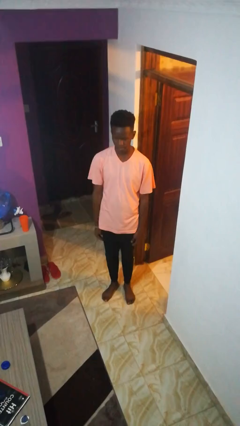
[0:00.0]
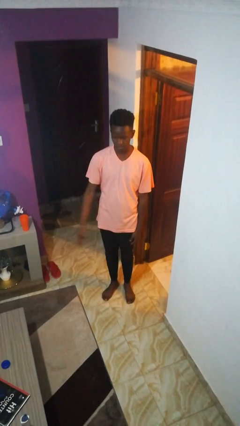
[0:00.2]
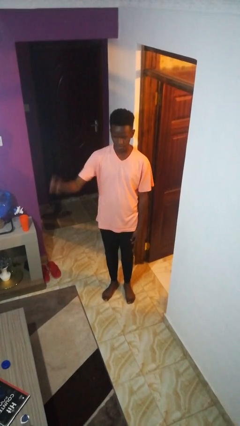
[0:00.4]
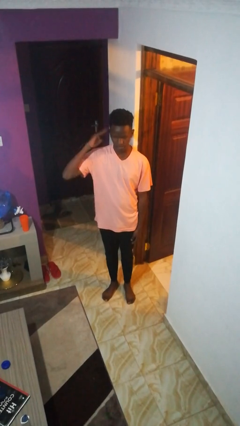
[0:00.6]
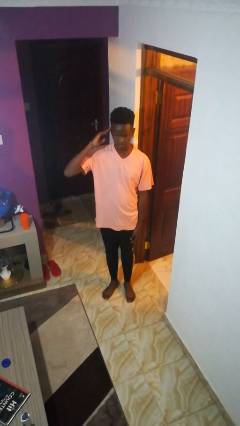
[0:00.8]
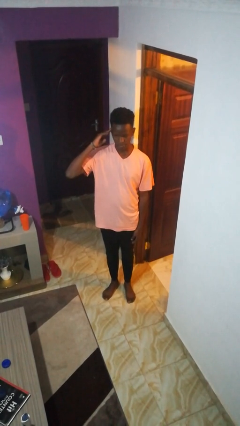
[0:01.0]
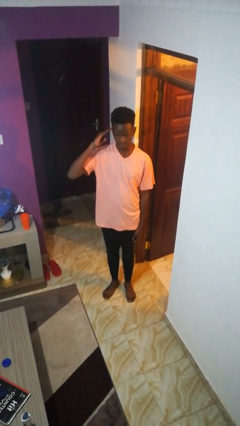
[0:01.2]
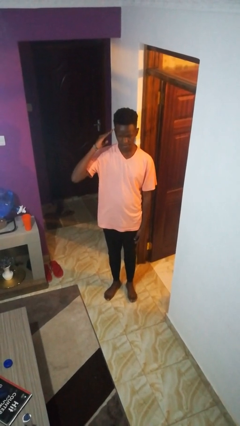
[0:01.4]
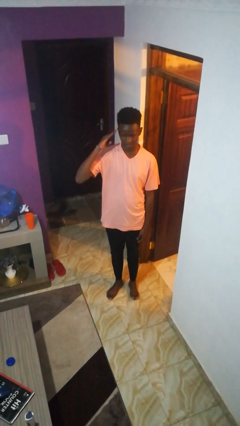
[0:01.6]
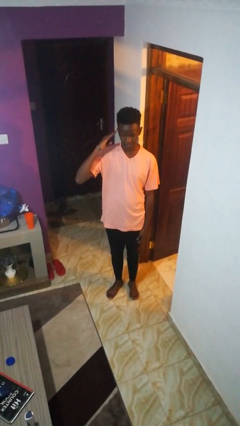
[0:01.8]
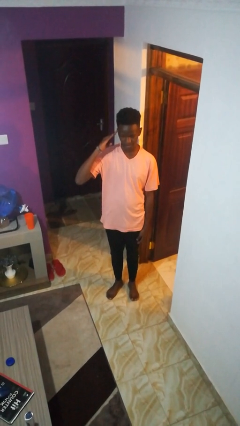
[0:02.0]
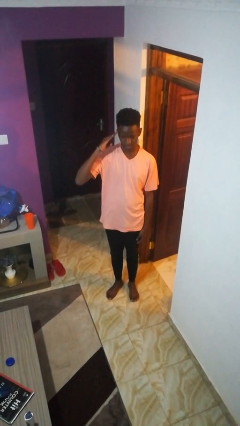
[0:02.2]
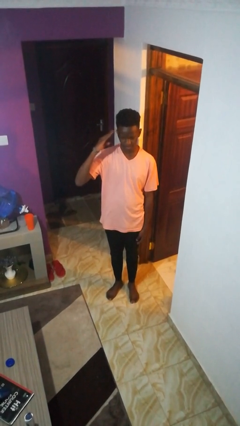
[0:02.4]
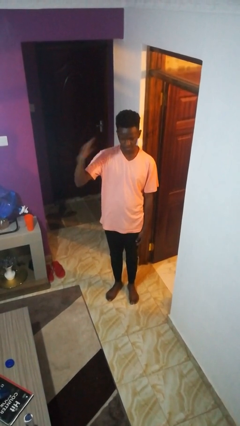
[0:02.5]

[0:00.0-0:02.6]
person salutes

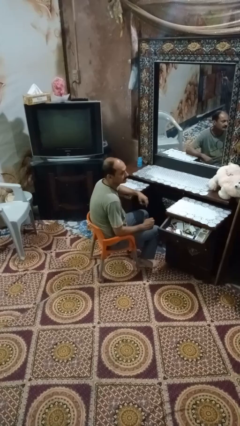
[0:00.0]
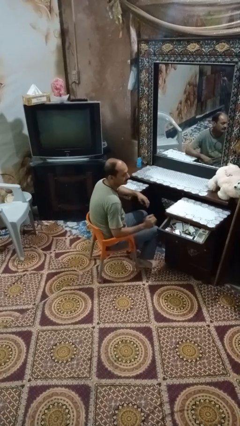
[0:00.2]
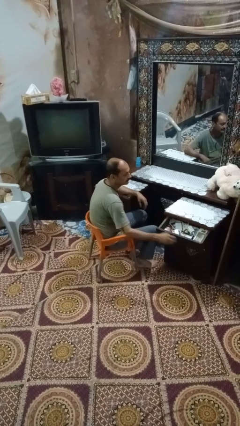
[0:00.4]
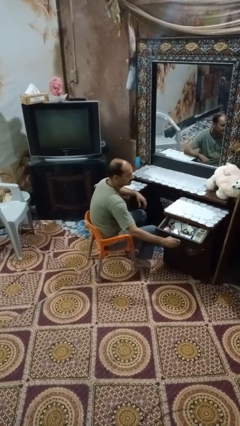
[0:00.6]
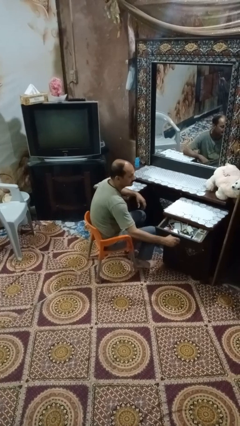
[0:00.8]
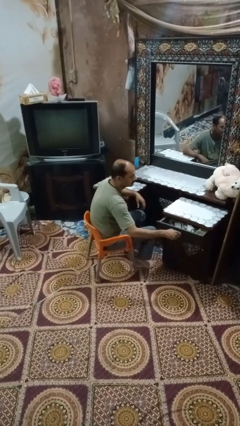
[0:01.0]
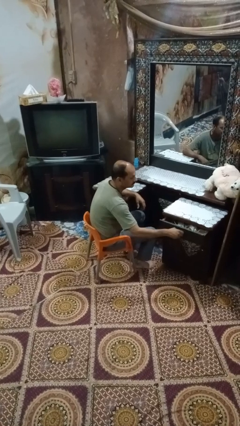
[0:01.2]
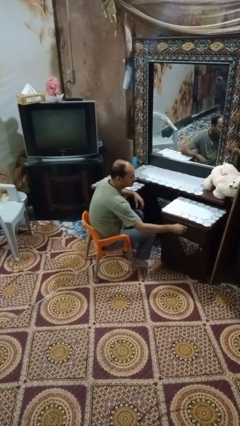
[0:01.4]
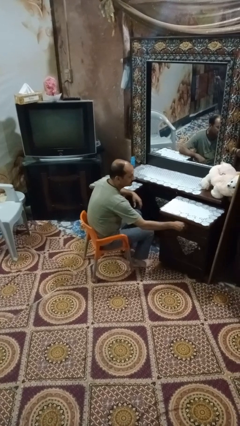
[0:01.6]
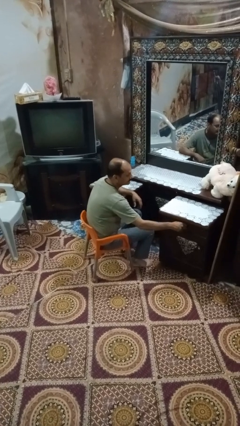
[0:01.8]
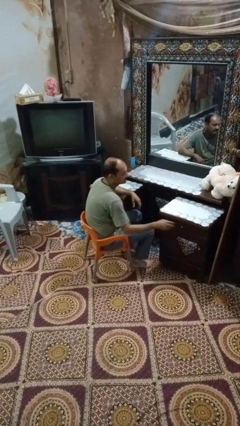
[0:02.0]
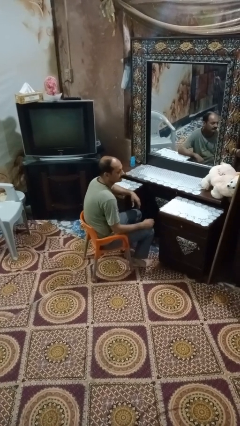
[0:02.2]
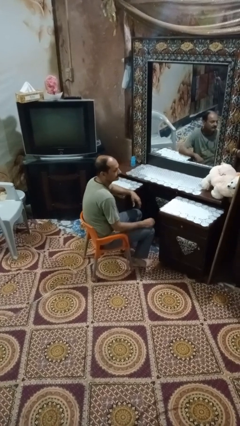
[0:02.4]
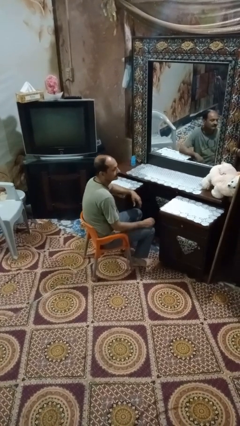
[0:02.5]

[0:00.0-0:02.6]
person closes dresser drawer

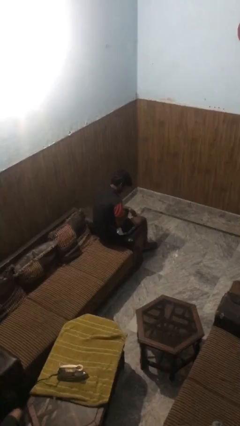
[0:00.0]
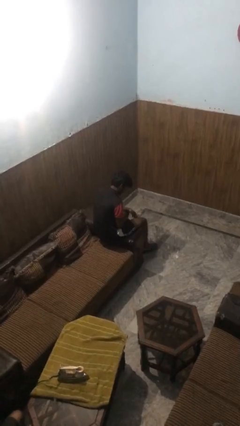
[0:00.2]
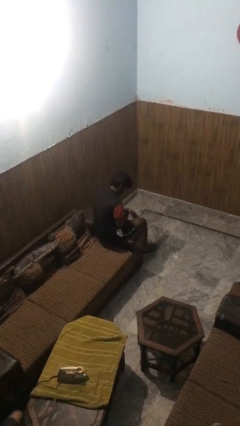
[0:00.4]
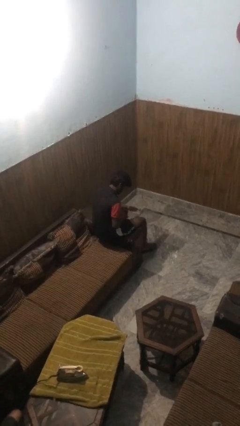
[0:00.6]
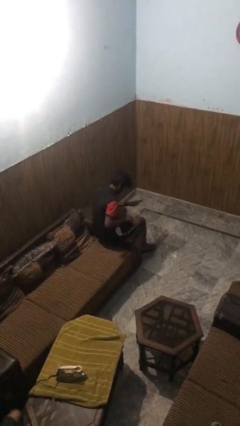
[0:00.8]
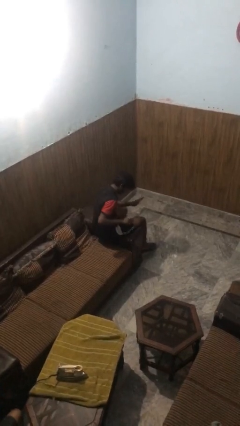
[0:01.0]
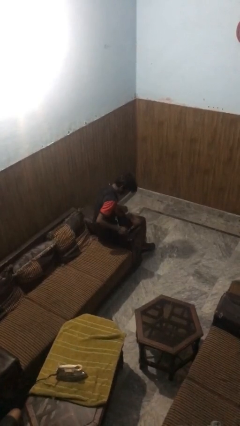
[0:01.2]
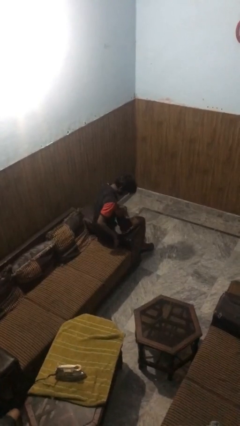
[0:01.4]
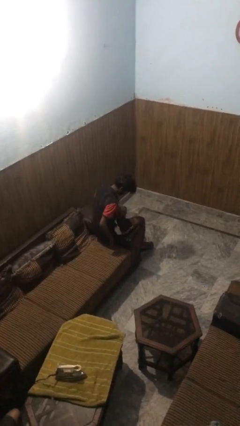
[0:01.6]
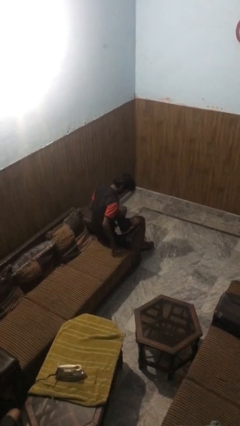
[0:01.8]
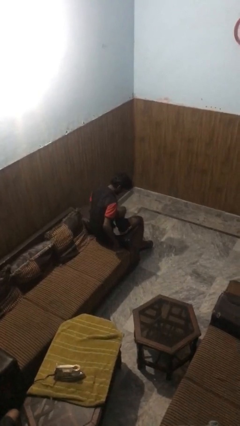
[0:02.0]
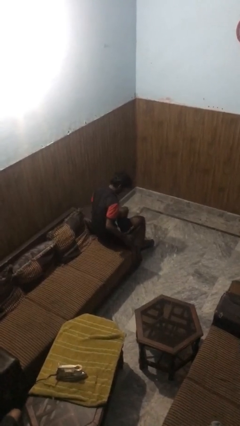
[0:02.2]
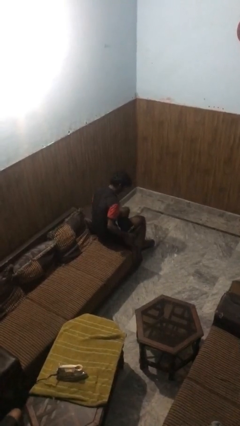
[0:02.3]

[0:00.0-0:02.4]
person swats bug

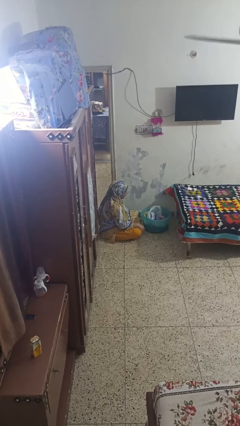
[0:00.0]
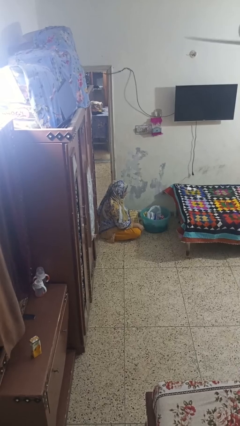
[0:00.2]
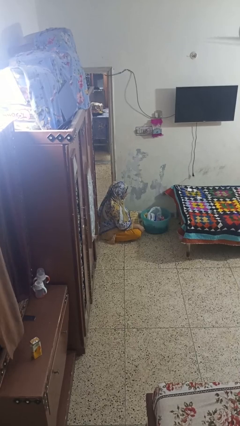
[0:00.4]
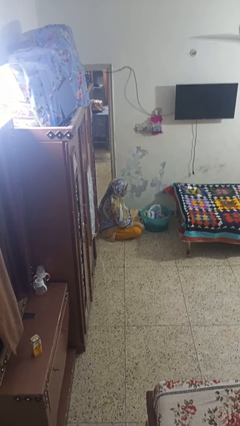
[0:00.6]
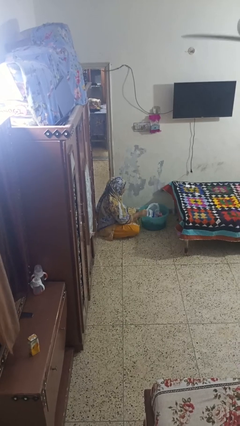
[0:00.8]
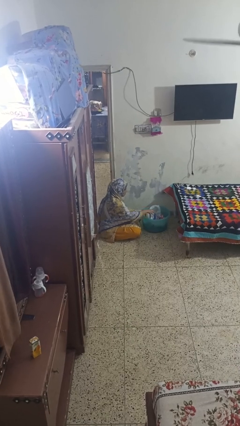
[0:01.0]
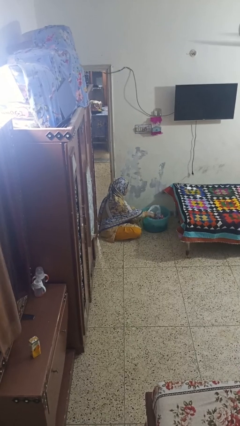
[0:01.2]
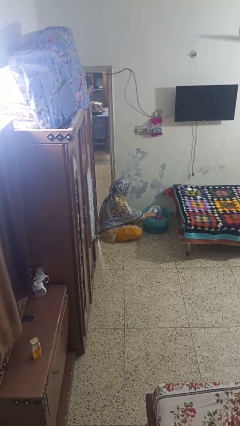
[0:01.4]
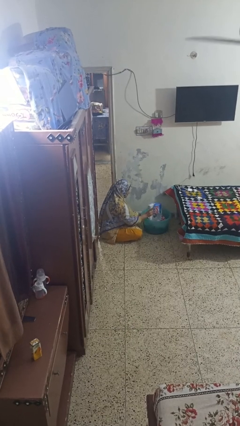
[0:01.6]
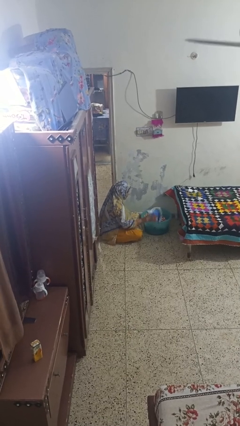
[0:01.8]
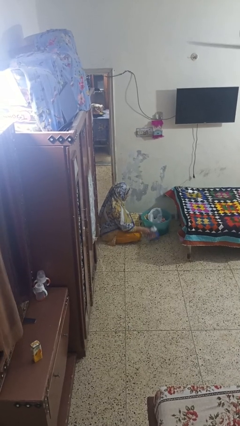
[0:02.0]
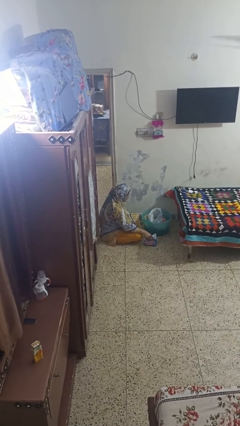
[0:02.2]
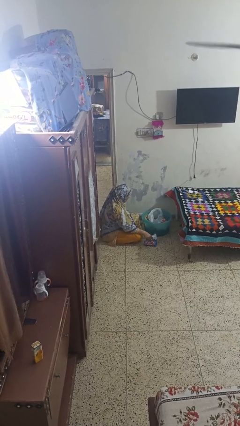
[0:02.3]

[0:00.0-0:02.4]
person takes object from basket

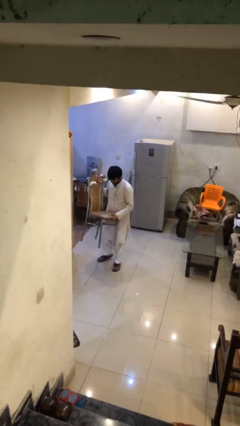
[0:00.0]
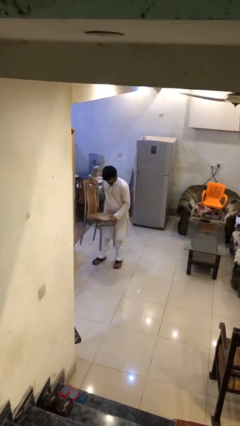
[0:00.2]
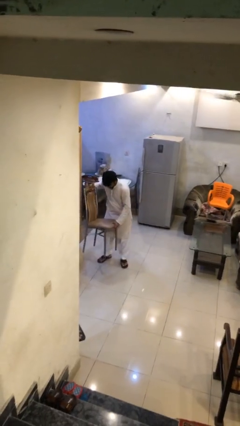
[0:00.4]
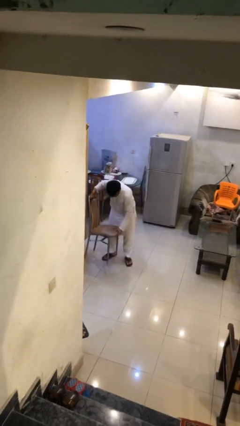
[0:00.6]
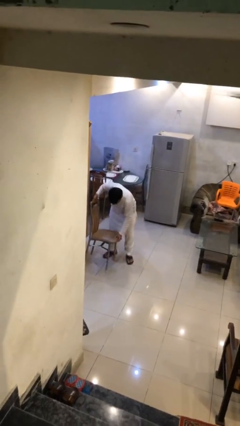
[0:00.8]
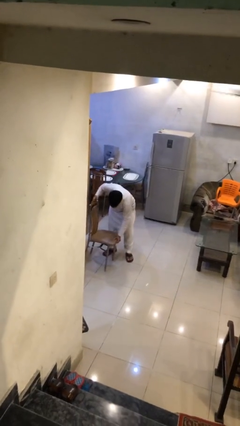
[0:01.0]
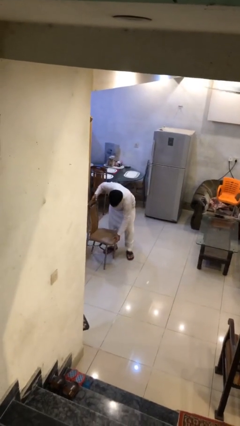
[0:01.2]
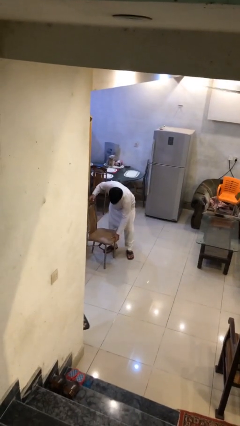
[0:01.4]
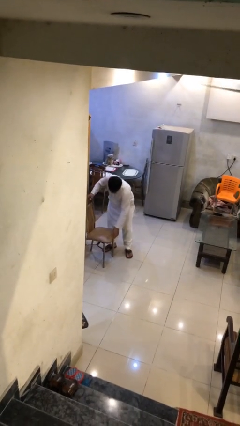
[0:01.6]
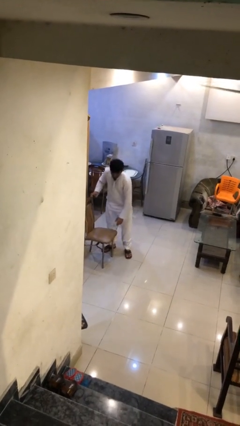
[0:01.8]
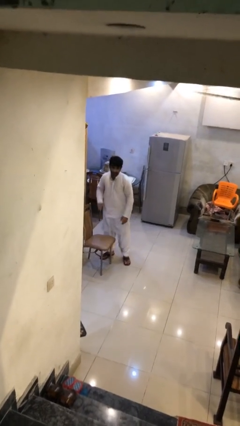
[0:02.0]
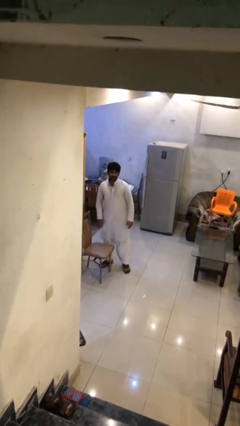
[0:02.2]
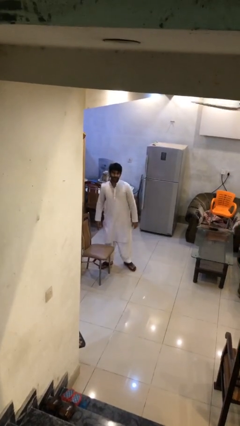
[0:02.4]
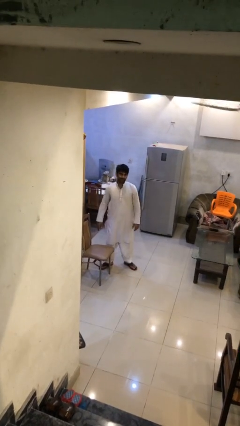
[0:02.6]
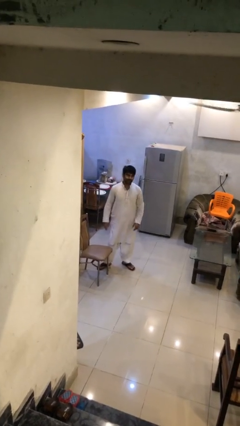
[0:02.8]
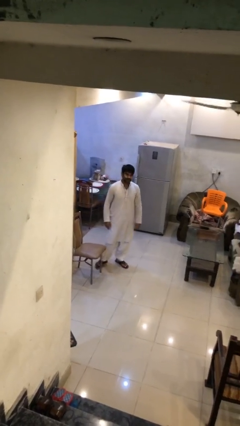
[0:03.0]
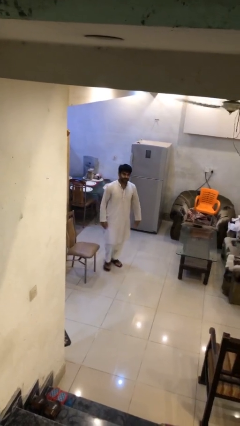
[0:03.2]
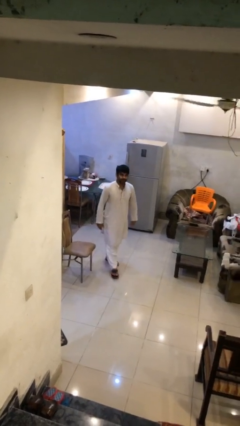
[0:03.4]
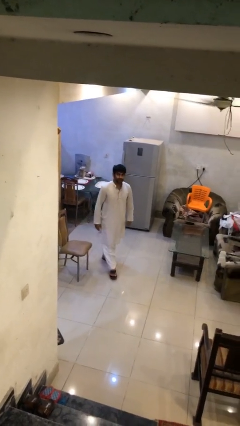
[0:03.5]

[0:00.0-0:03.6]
person puts down object on floor

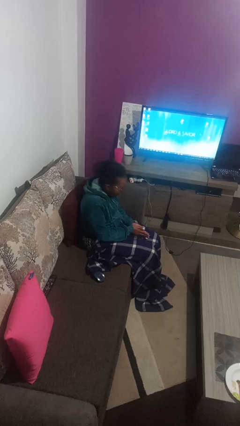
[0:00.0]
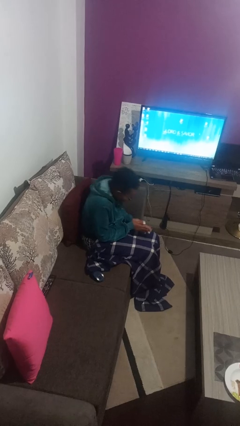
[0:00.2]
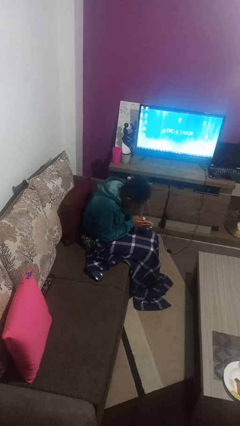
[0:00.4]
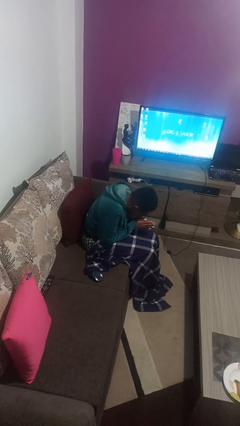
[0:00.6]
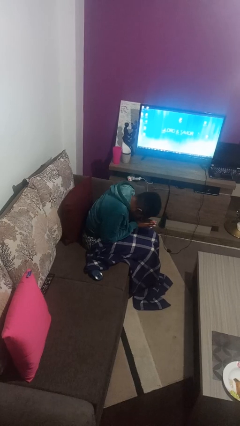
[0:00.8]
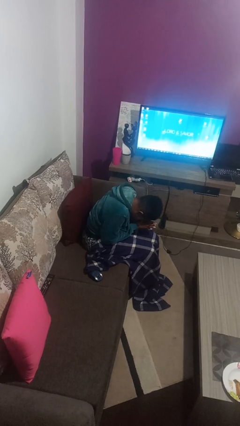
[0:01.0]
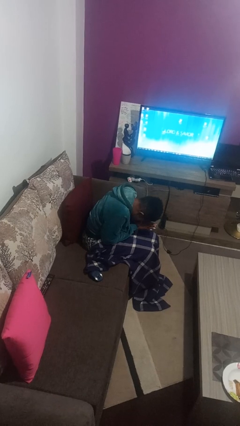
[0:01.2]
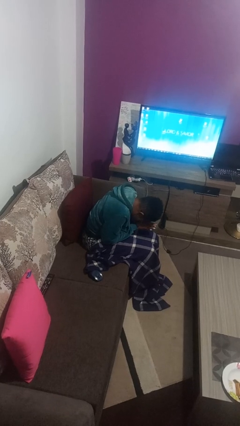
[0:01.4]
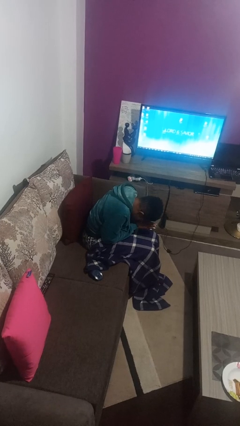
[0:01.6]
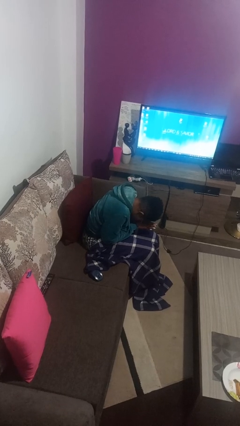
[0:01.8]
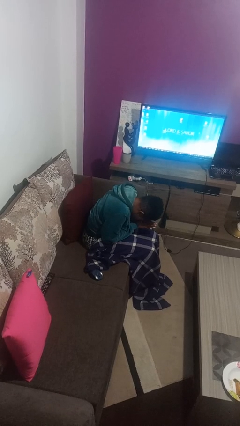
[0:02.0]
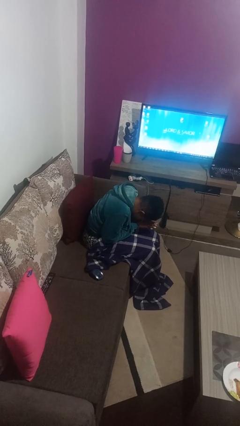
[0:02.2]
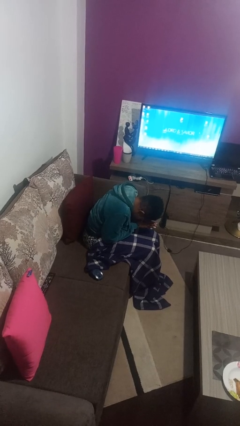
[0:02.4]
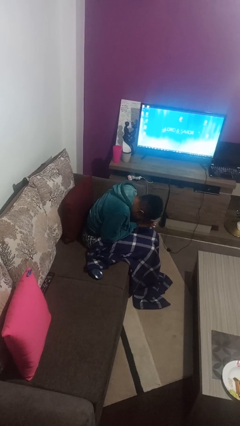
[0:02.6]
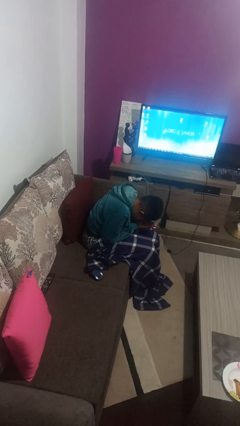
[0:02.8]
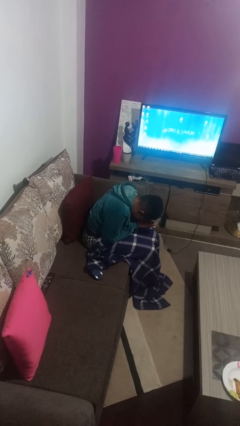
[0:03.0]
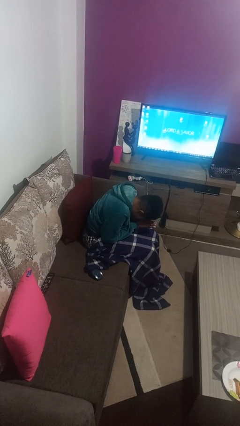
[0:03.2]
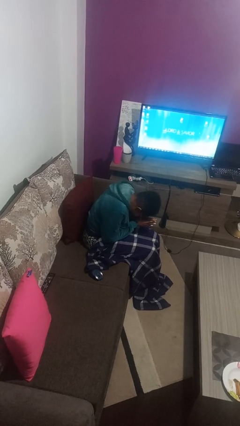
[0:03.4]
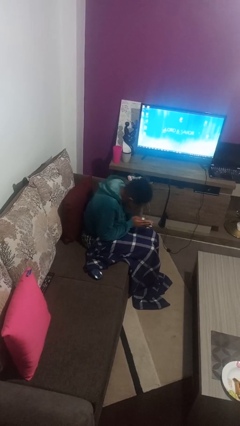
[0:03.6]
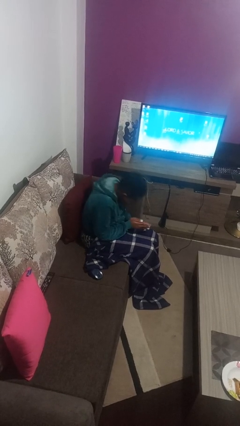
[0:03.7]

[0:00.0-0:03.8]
person prays
